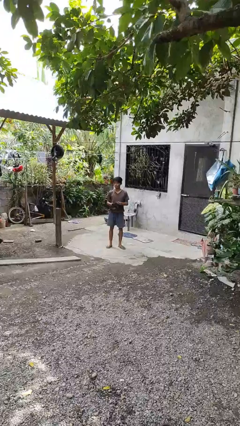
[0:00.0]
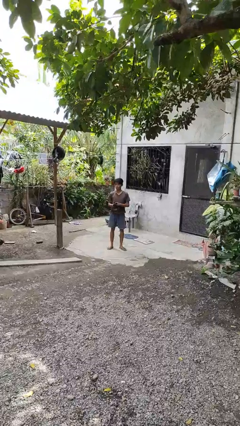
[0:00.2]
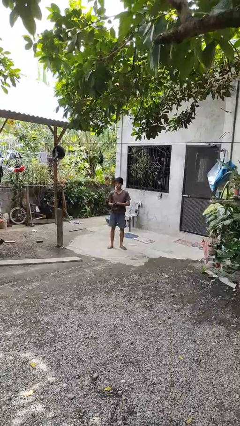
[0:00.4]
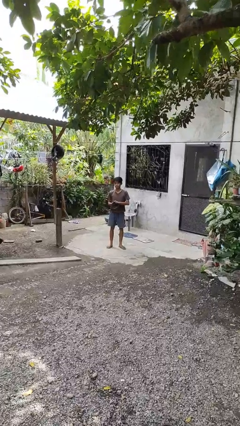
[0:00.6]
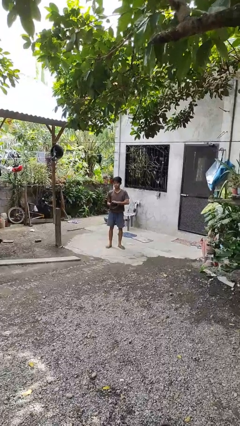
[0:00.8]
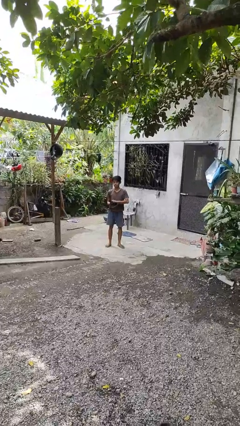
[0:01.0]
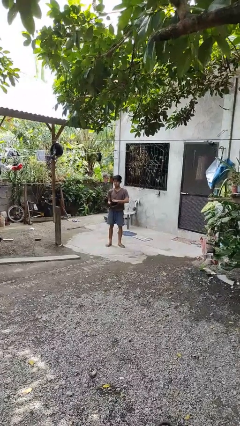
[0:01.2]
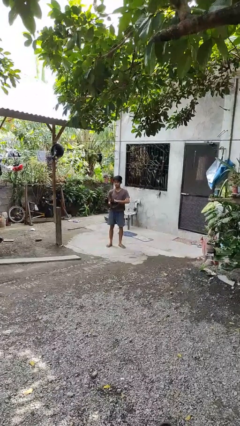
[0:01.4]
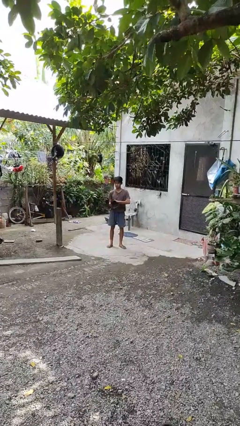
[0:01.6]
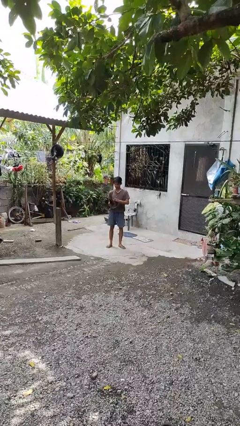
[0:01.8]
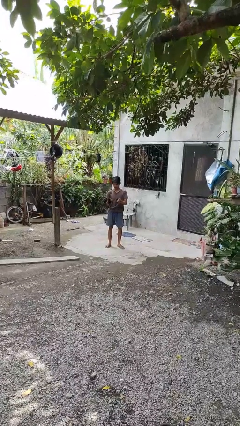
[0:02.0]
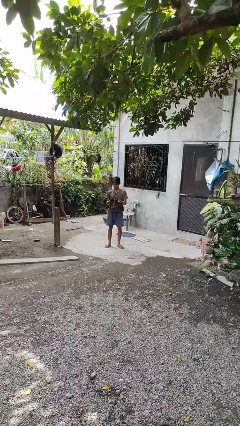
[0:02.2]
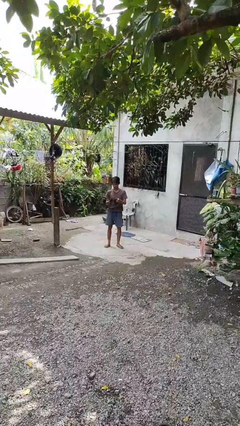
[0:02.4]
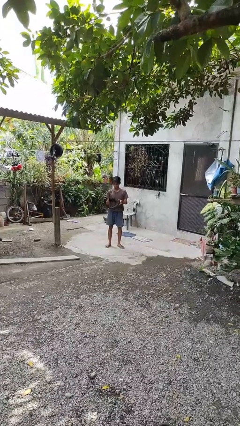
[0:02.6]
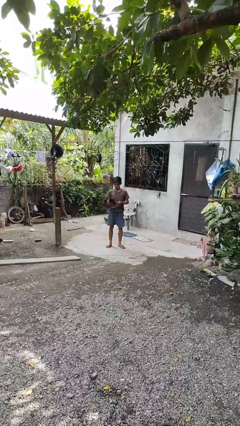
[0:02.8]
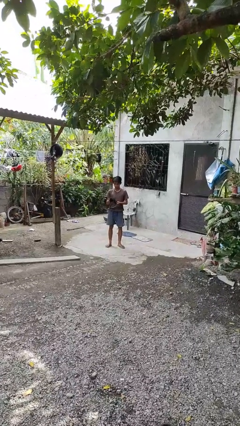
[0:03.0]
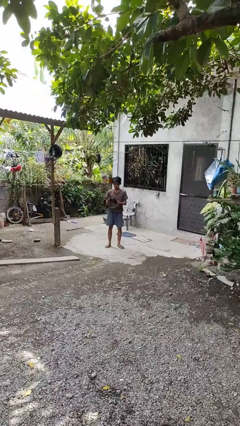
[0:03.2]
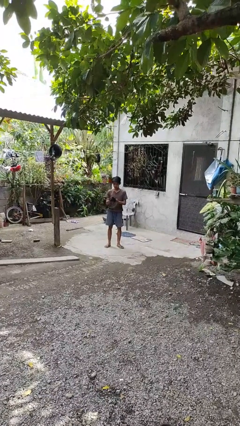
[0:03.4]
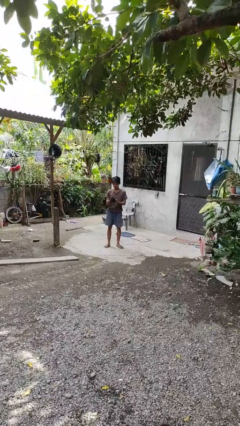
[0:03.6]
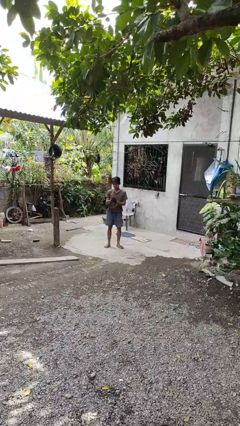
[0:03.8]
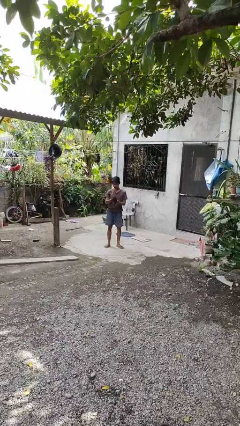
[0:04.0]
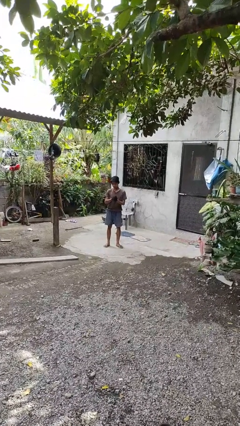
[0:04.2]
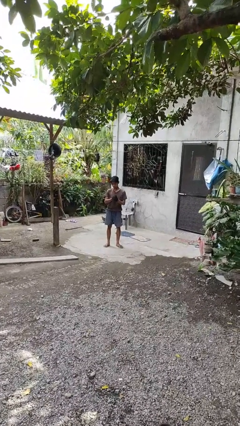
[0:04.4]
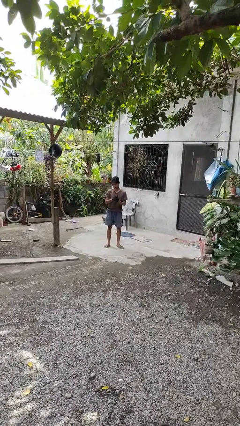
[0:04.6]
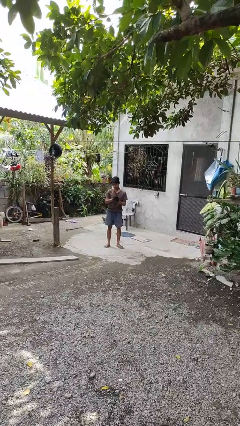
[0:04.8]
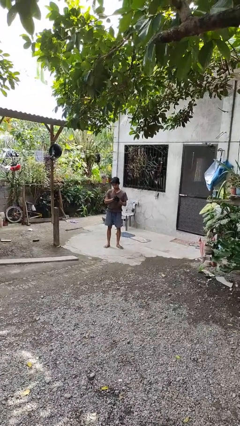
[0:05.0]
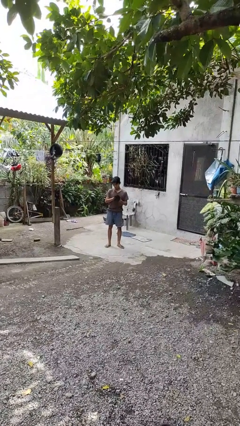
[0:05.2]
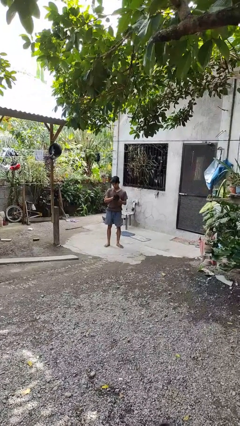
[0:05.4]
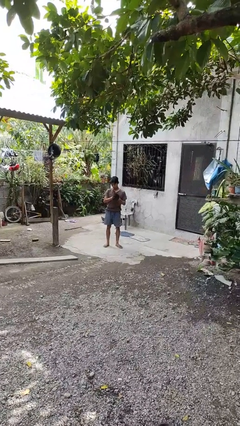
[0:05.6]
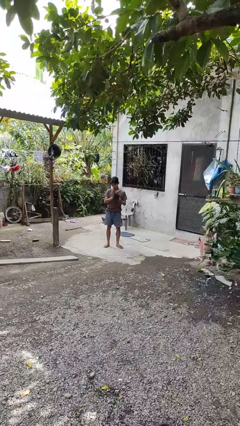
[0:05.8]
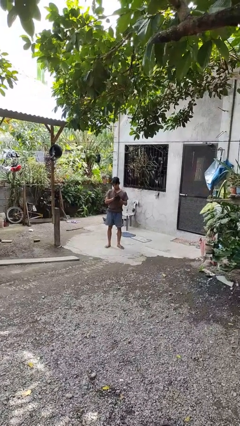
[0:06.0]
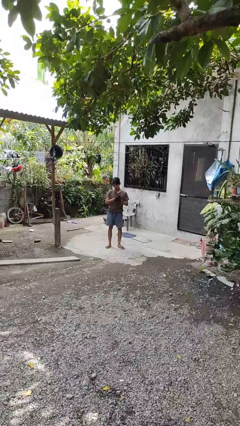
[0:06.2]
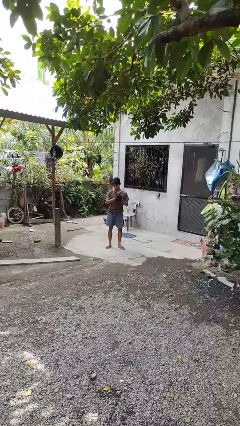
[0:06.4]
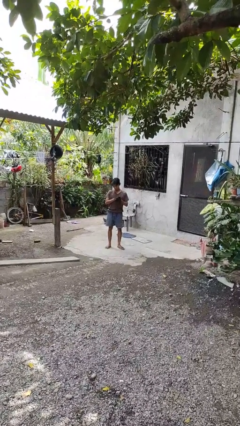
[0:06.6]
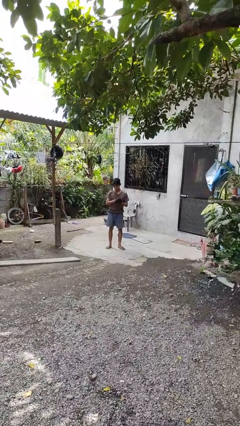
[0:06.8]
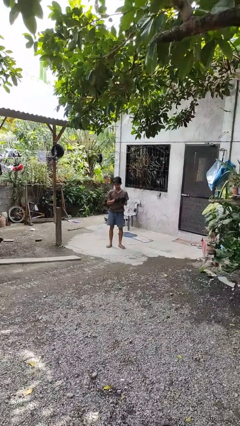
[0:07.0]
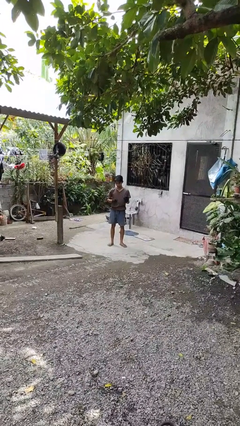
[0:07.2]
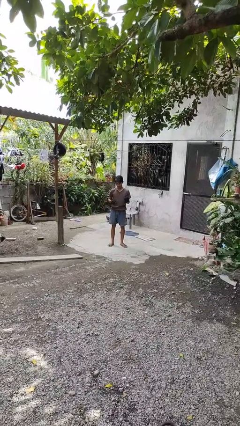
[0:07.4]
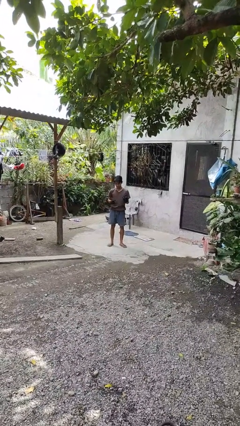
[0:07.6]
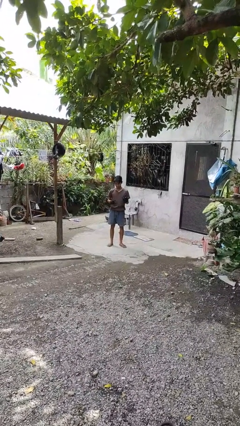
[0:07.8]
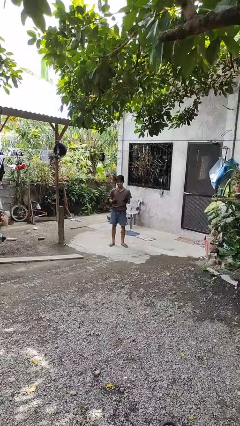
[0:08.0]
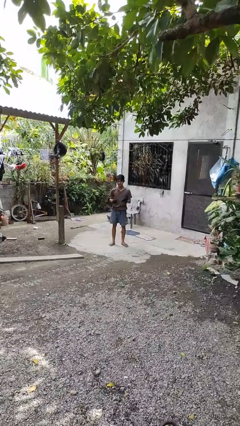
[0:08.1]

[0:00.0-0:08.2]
person puts on gloves

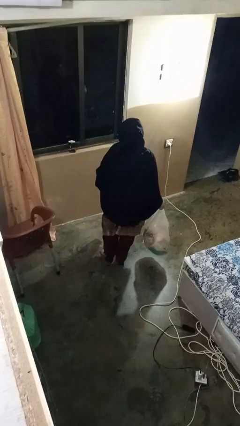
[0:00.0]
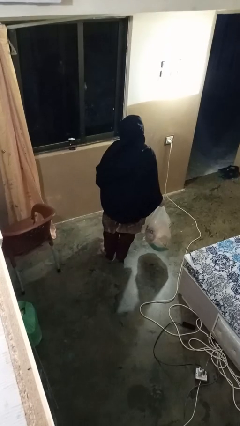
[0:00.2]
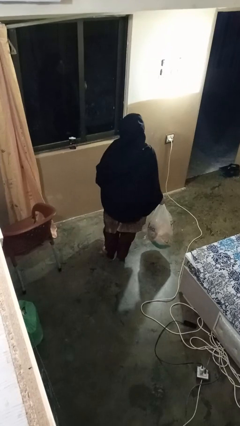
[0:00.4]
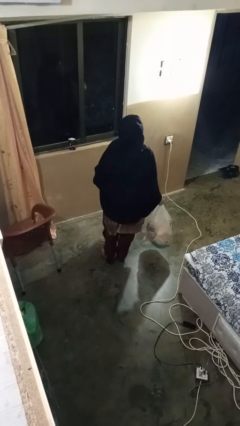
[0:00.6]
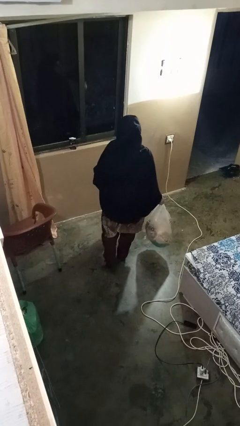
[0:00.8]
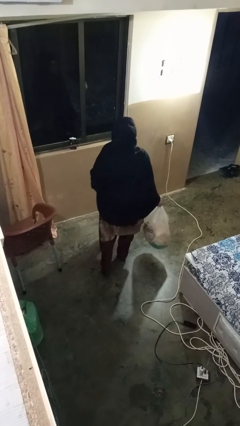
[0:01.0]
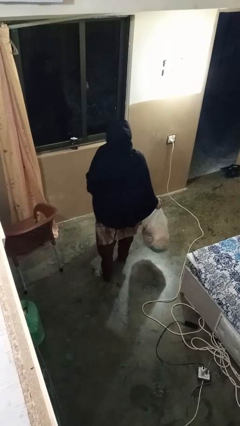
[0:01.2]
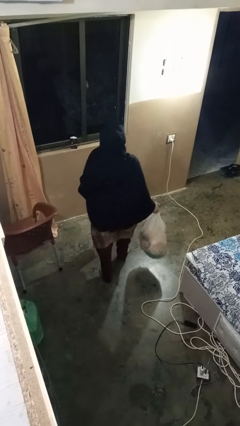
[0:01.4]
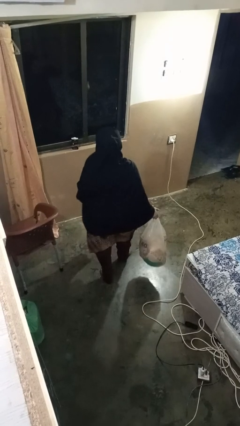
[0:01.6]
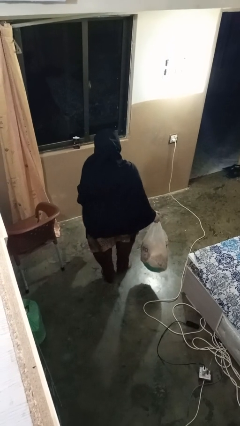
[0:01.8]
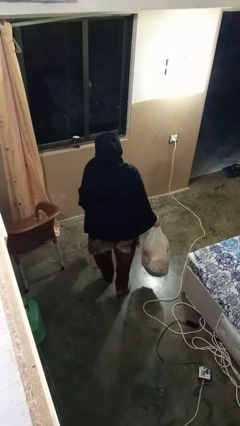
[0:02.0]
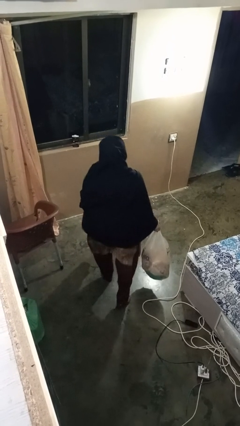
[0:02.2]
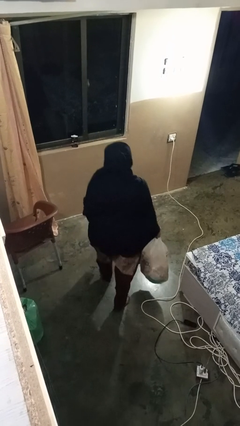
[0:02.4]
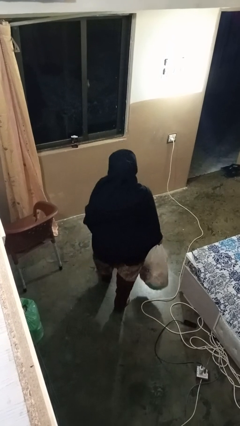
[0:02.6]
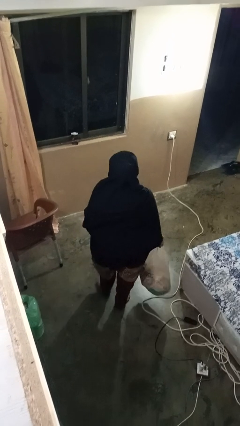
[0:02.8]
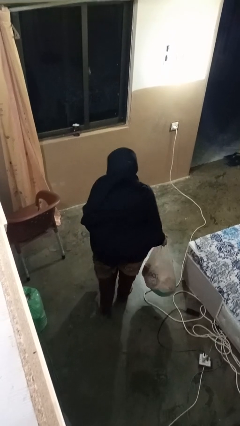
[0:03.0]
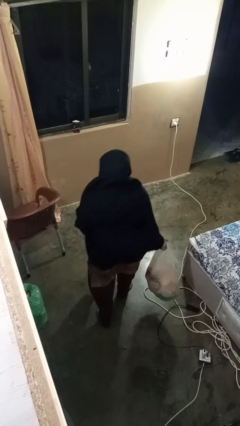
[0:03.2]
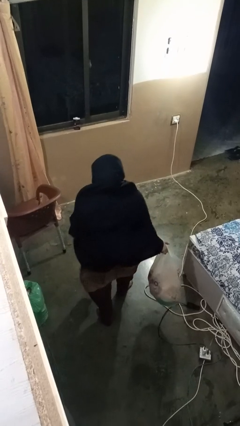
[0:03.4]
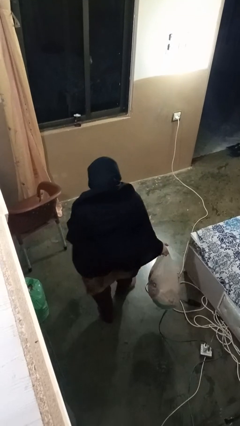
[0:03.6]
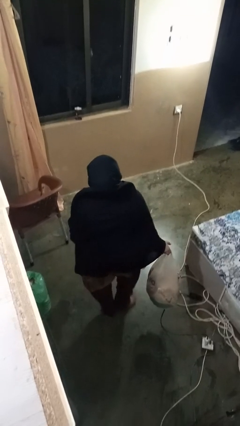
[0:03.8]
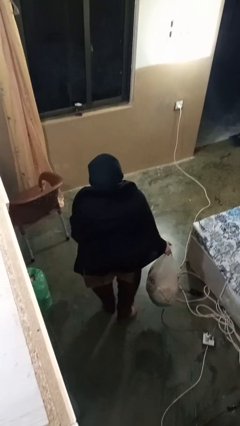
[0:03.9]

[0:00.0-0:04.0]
person carries groceries

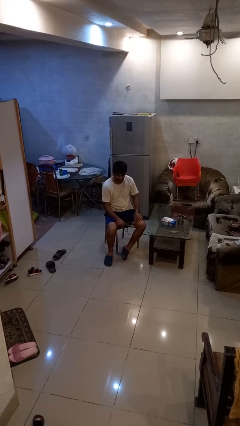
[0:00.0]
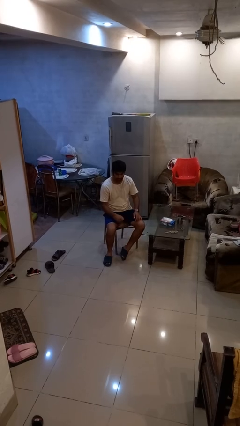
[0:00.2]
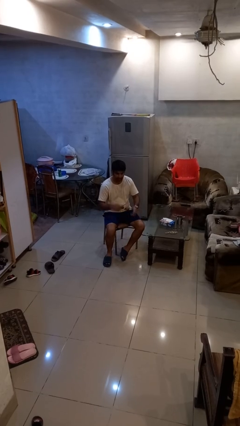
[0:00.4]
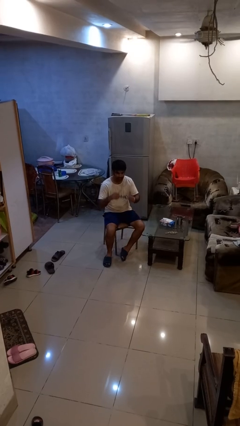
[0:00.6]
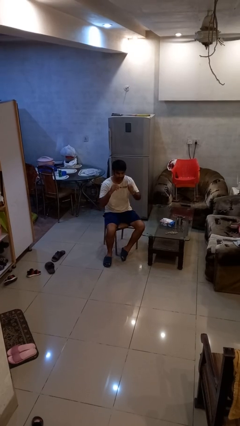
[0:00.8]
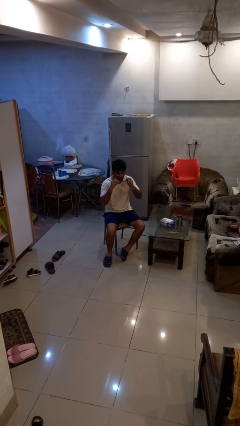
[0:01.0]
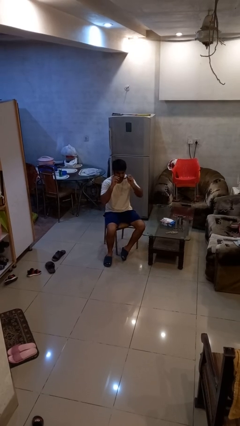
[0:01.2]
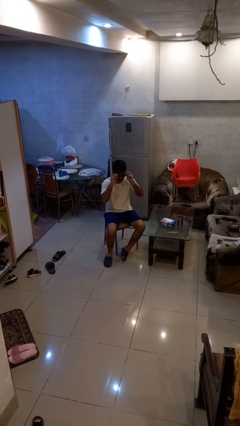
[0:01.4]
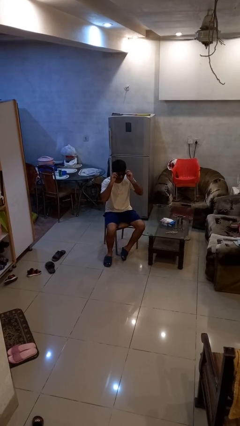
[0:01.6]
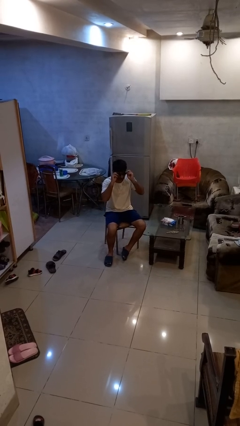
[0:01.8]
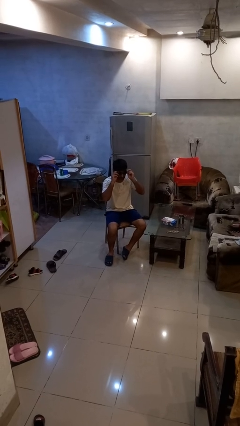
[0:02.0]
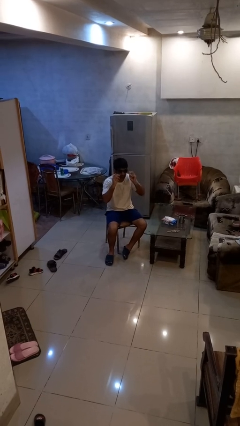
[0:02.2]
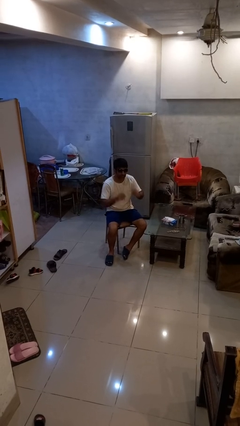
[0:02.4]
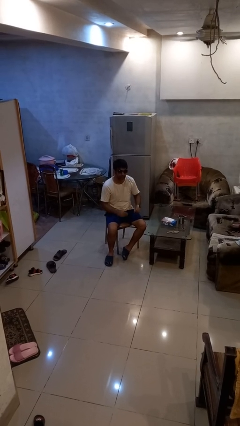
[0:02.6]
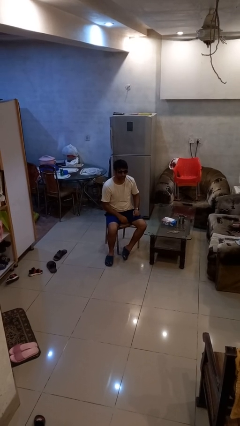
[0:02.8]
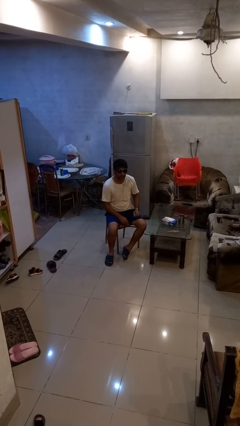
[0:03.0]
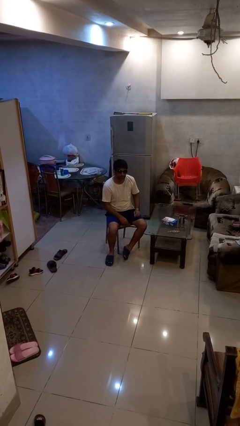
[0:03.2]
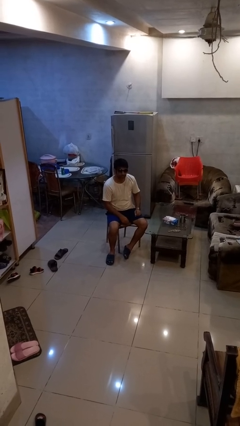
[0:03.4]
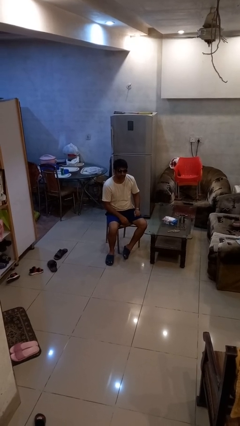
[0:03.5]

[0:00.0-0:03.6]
person puts on sunglasses

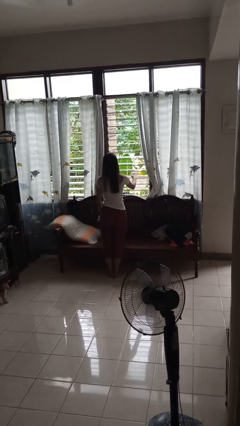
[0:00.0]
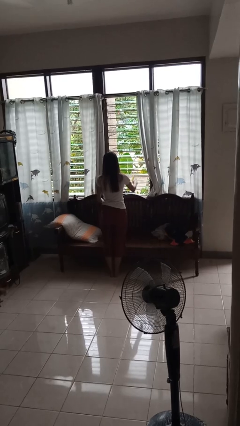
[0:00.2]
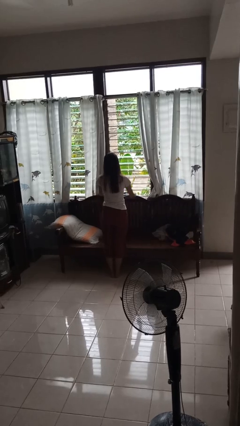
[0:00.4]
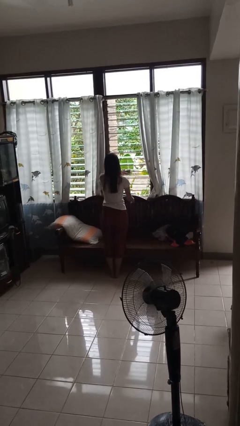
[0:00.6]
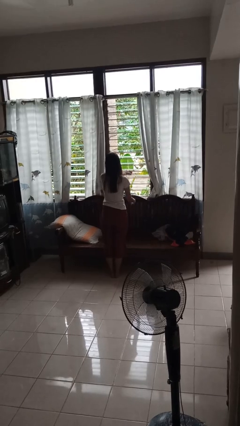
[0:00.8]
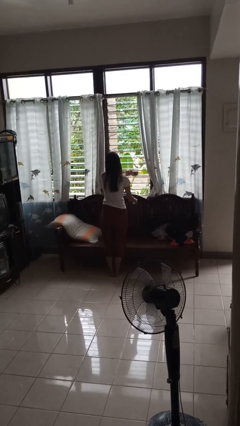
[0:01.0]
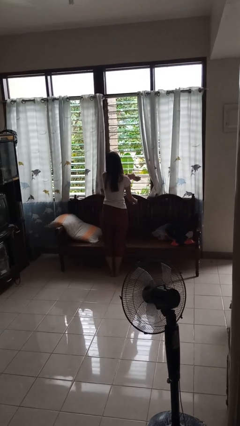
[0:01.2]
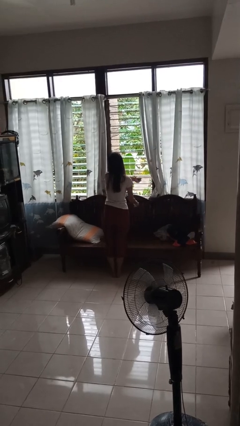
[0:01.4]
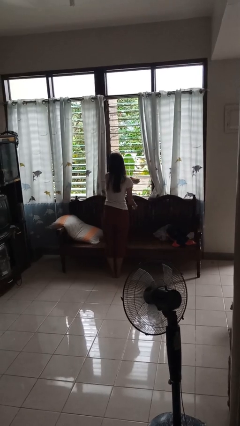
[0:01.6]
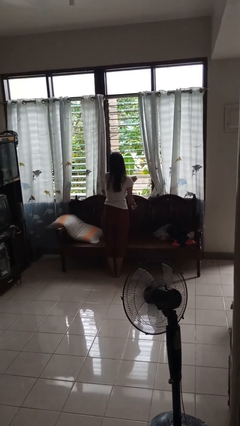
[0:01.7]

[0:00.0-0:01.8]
person washes window
